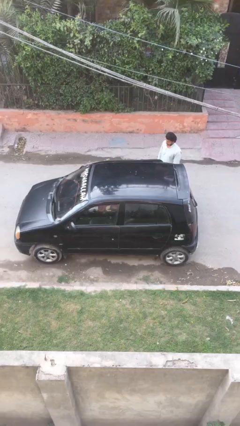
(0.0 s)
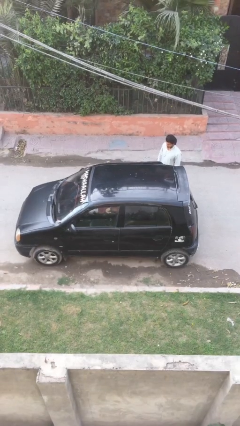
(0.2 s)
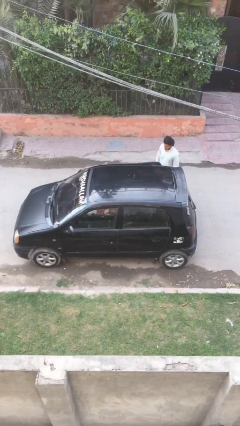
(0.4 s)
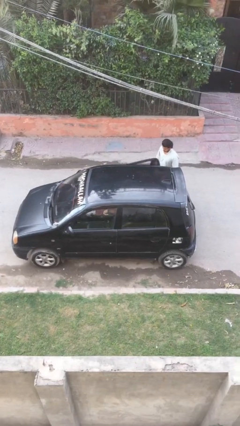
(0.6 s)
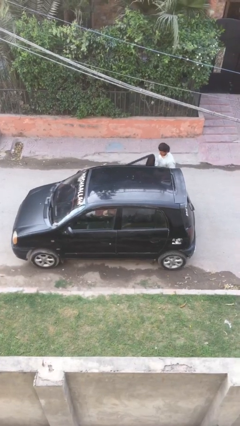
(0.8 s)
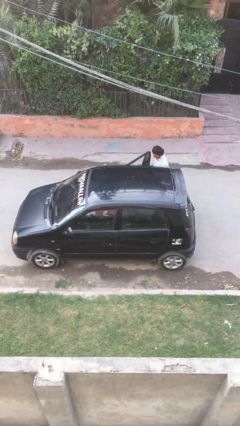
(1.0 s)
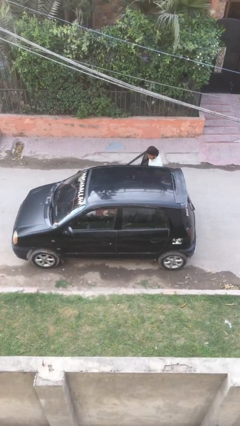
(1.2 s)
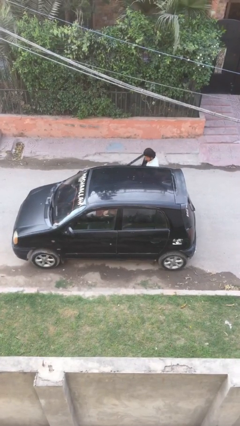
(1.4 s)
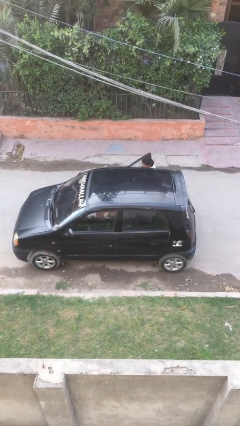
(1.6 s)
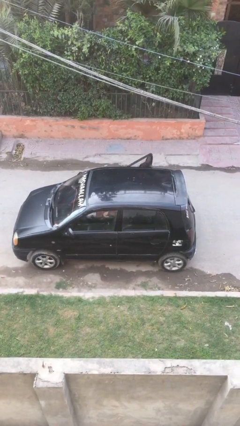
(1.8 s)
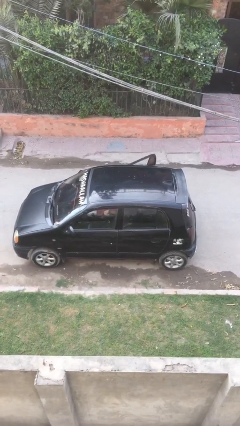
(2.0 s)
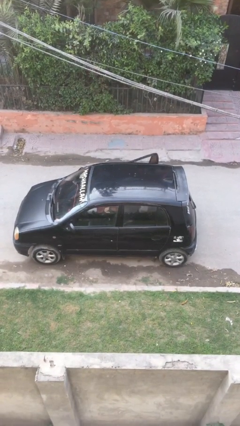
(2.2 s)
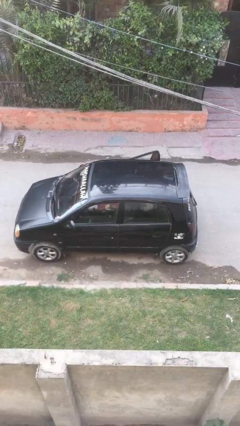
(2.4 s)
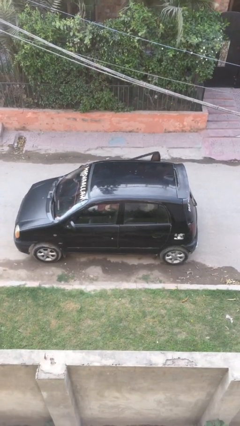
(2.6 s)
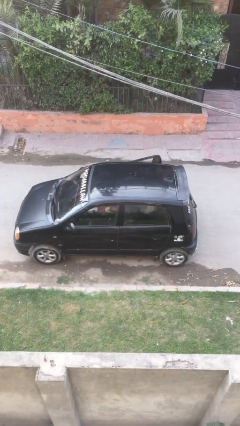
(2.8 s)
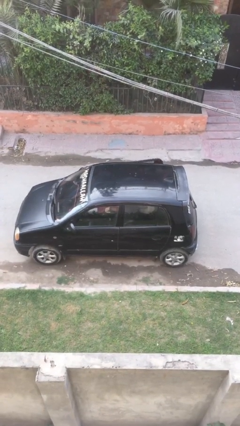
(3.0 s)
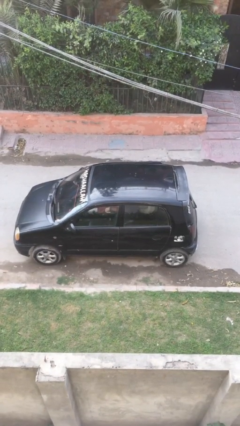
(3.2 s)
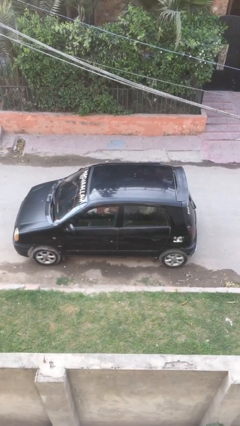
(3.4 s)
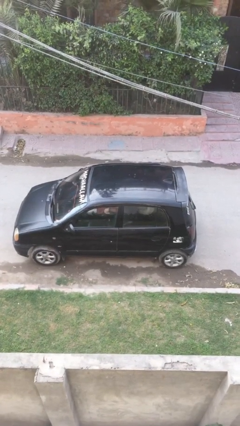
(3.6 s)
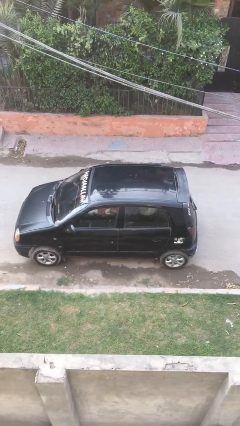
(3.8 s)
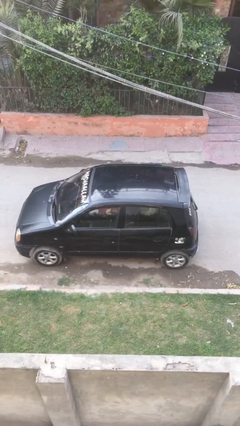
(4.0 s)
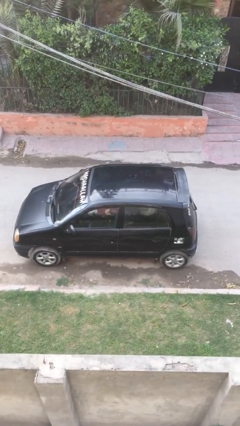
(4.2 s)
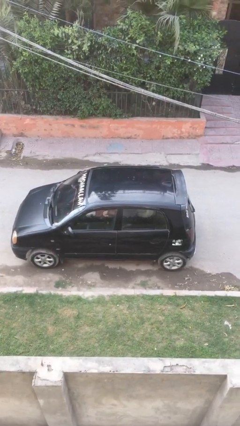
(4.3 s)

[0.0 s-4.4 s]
car picks up person

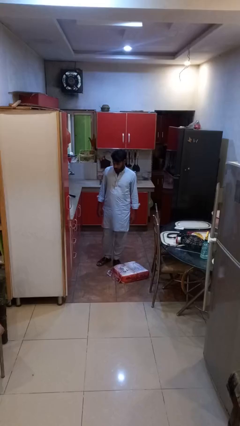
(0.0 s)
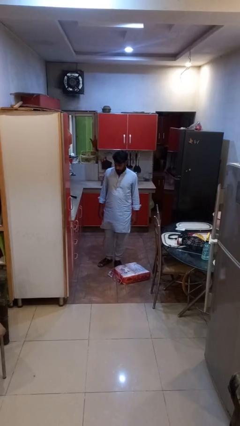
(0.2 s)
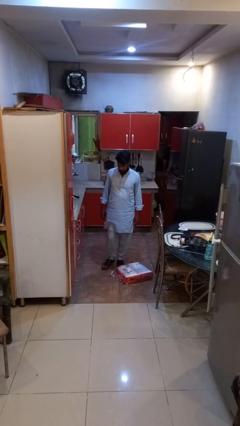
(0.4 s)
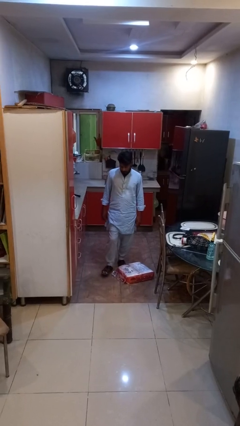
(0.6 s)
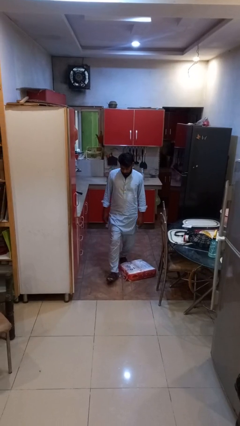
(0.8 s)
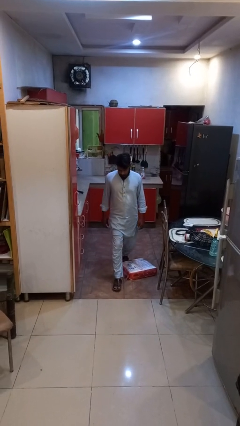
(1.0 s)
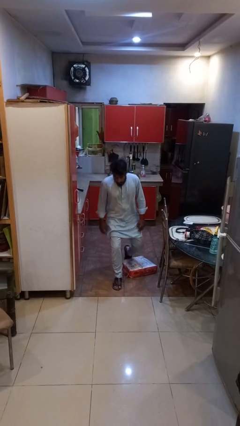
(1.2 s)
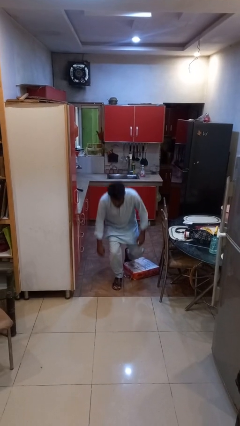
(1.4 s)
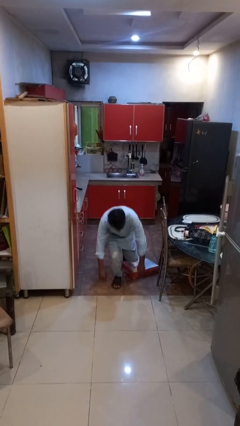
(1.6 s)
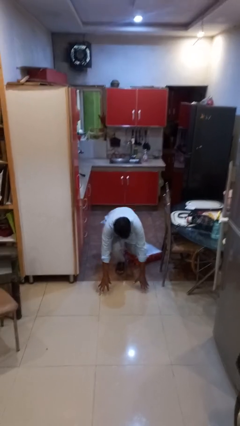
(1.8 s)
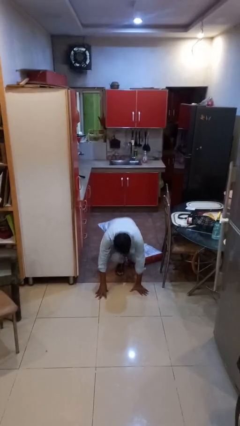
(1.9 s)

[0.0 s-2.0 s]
person trips on object on floor

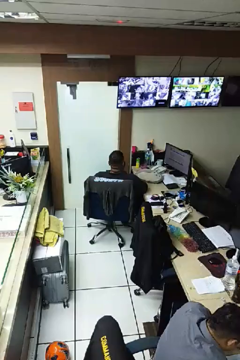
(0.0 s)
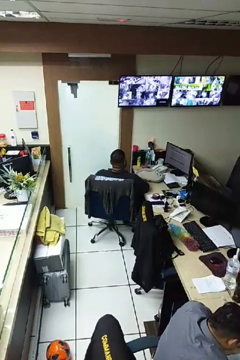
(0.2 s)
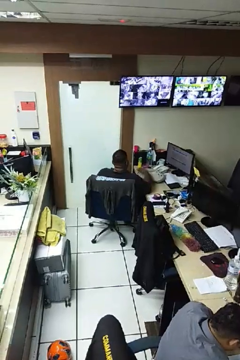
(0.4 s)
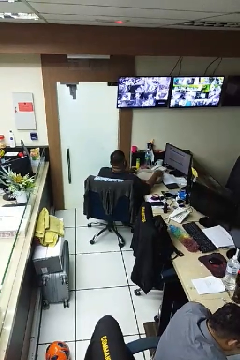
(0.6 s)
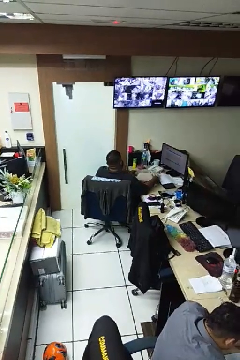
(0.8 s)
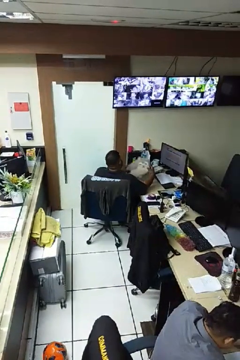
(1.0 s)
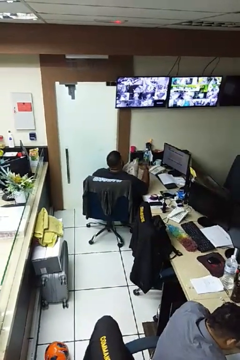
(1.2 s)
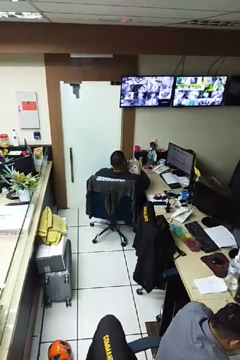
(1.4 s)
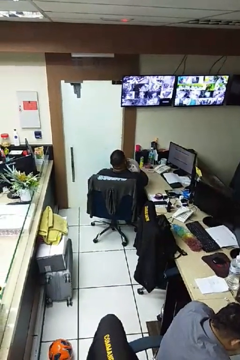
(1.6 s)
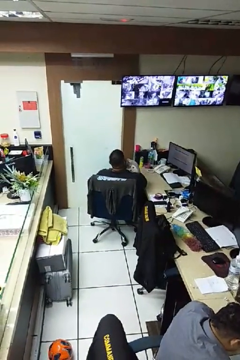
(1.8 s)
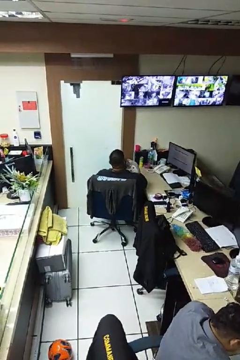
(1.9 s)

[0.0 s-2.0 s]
person hugs stuffed animal

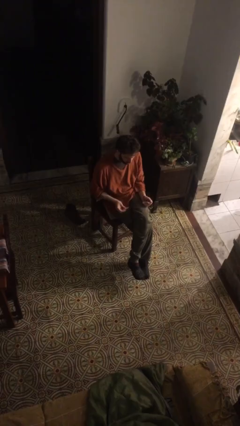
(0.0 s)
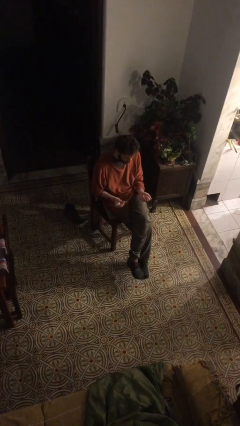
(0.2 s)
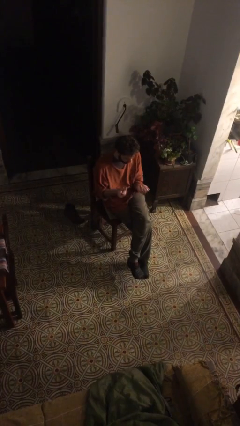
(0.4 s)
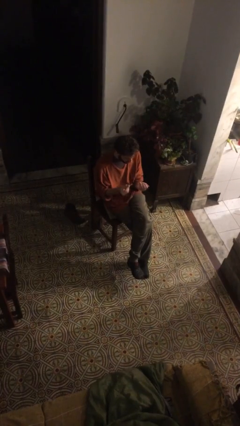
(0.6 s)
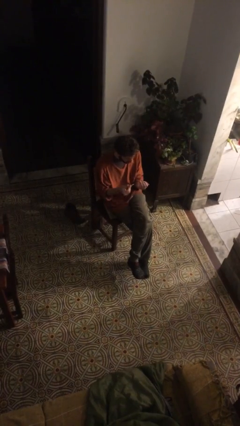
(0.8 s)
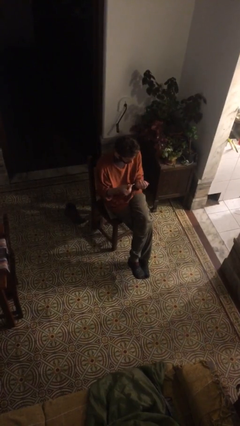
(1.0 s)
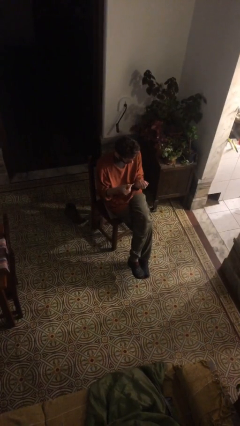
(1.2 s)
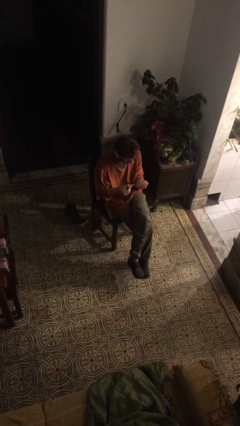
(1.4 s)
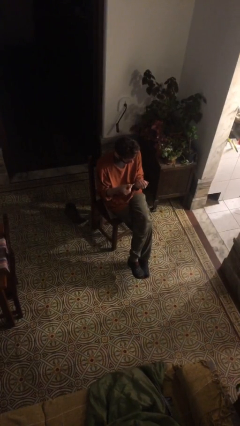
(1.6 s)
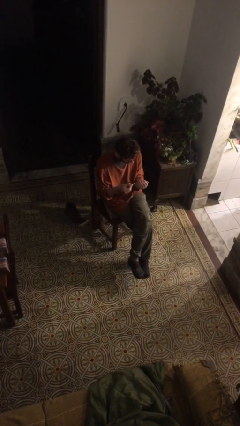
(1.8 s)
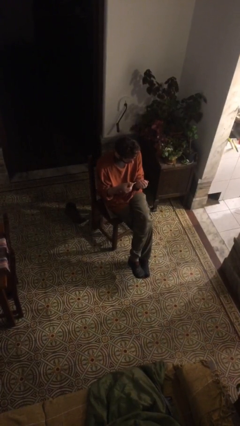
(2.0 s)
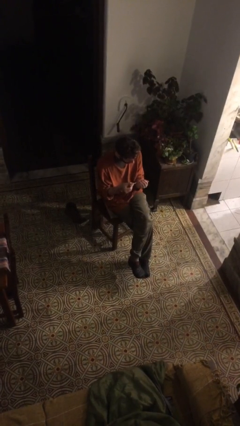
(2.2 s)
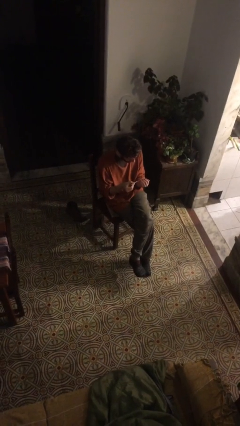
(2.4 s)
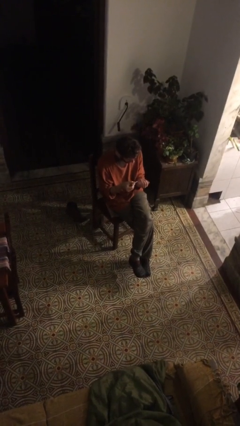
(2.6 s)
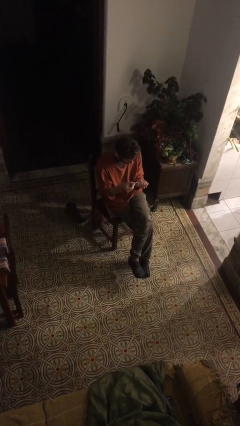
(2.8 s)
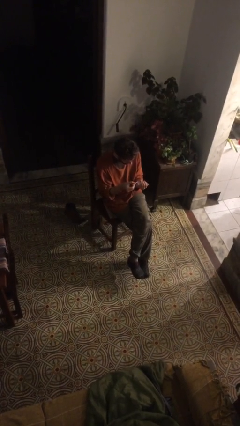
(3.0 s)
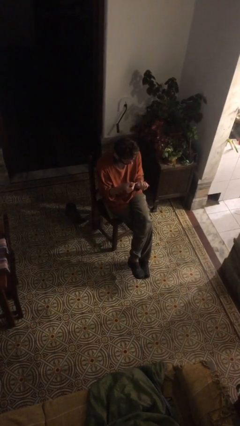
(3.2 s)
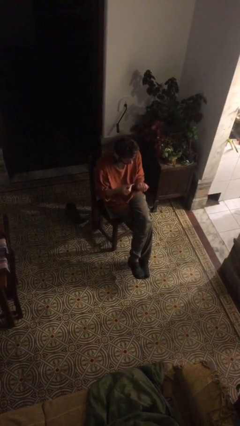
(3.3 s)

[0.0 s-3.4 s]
person files fingernails

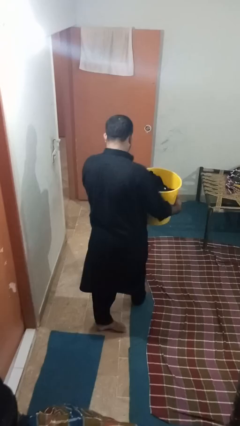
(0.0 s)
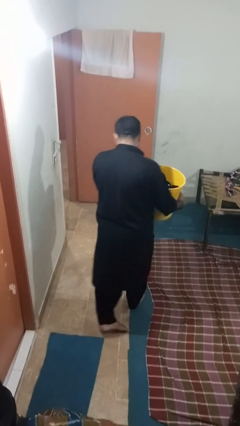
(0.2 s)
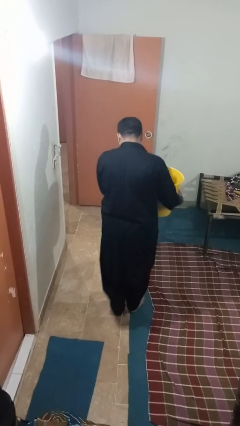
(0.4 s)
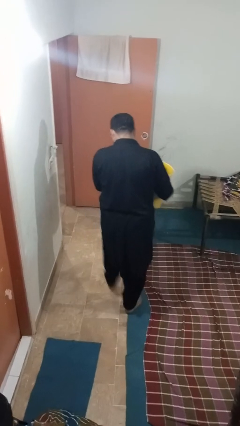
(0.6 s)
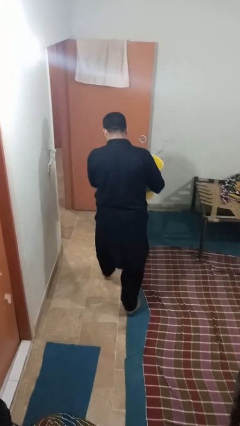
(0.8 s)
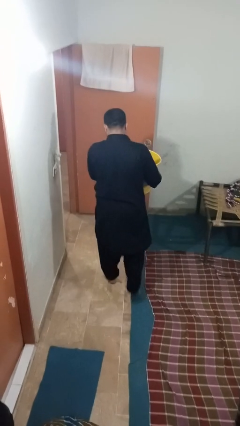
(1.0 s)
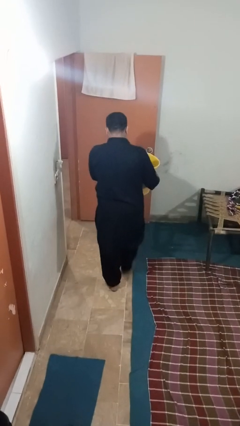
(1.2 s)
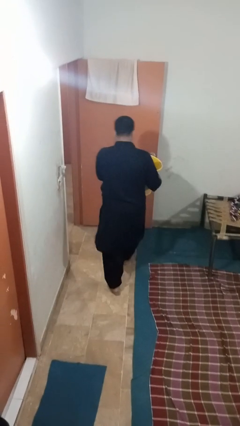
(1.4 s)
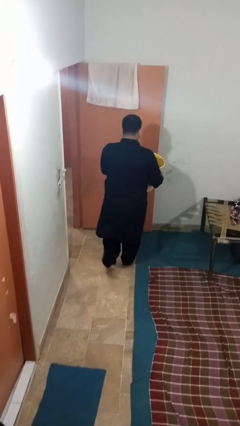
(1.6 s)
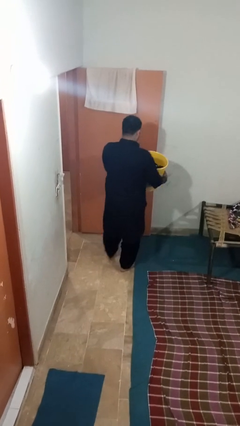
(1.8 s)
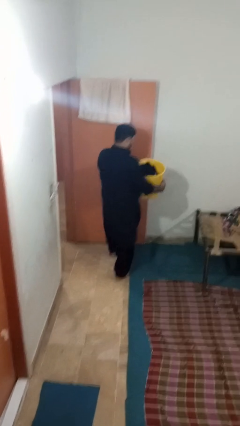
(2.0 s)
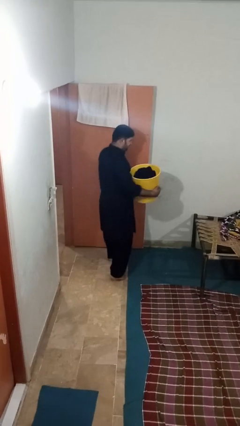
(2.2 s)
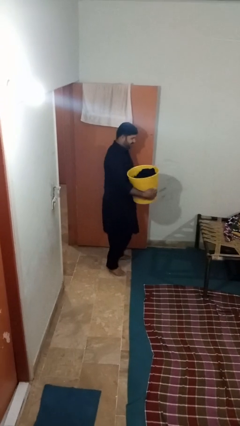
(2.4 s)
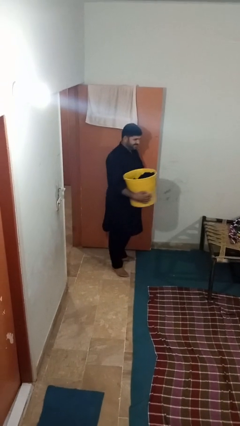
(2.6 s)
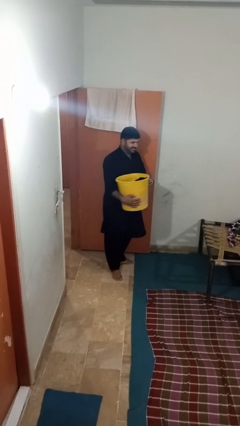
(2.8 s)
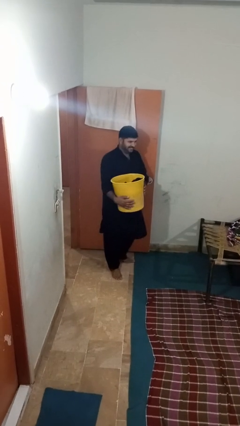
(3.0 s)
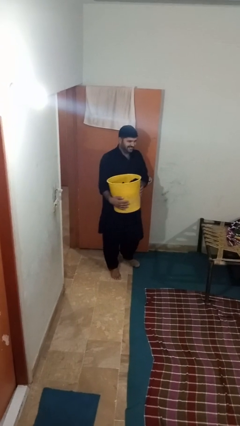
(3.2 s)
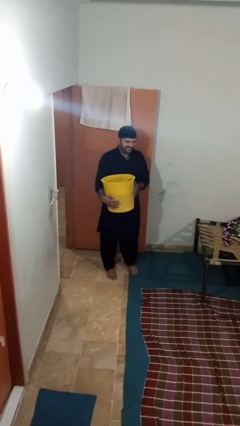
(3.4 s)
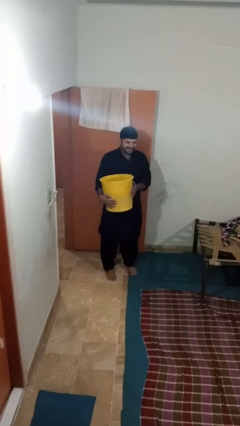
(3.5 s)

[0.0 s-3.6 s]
person carries laundry basket

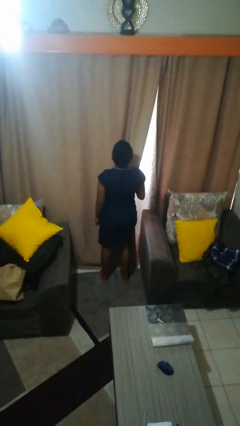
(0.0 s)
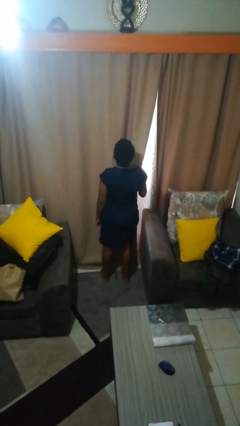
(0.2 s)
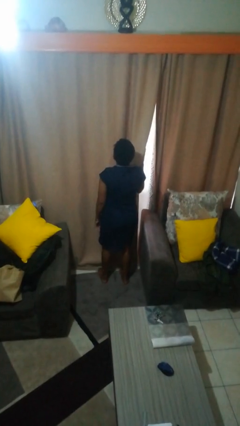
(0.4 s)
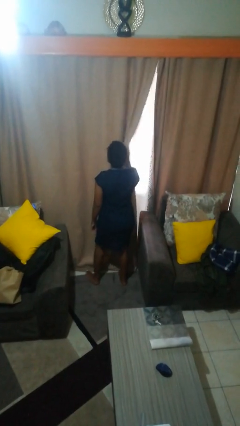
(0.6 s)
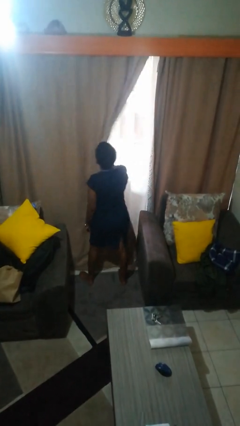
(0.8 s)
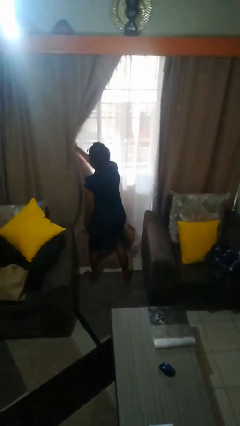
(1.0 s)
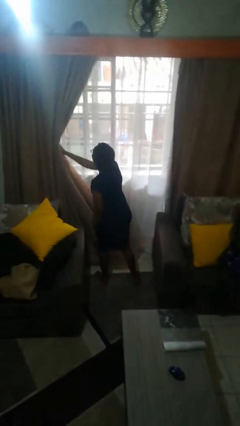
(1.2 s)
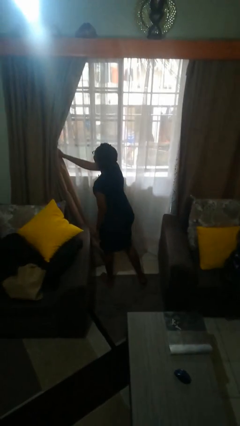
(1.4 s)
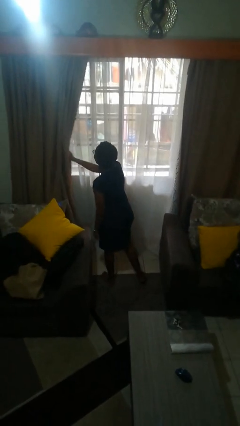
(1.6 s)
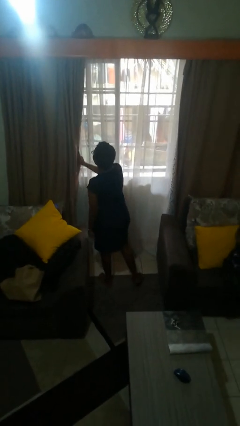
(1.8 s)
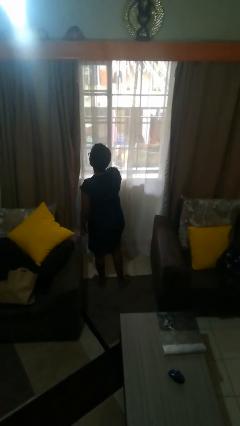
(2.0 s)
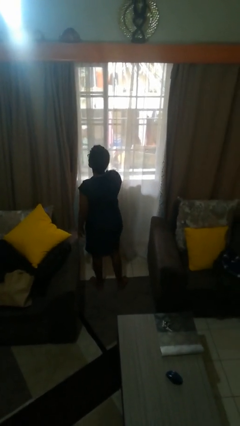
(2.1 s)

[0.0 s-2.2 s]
person opens curtains
